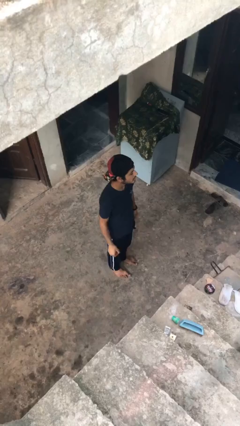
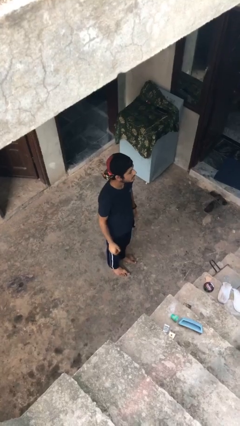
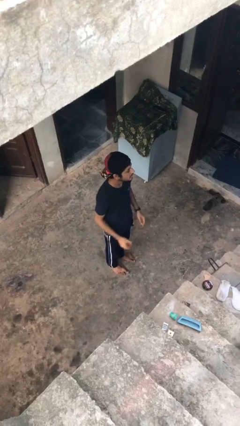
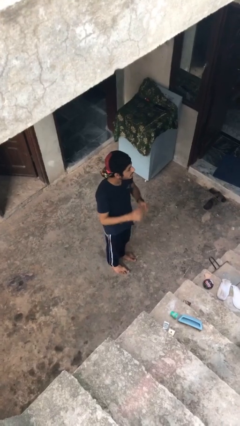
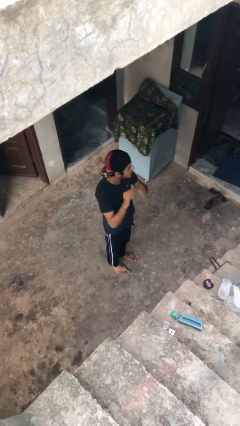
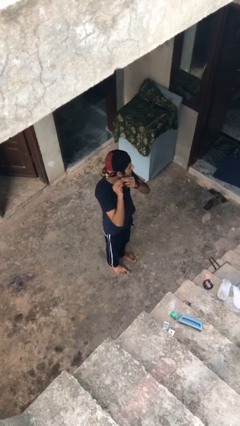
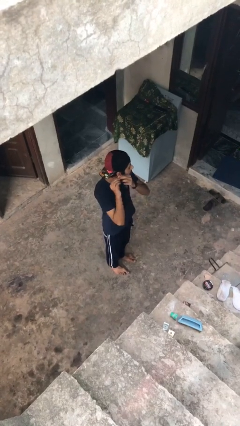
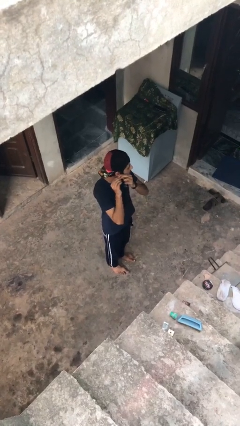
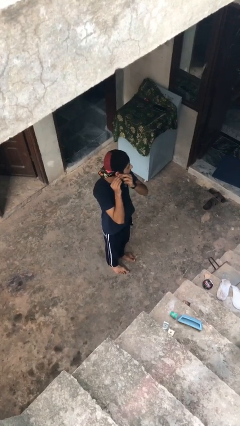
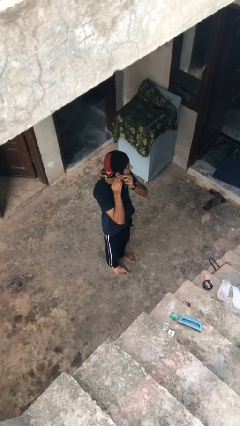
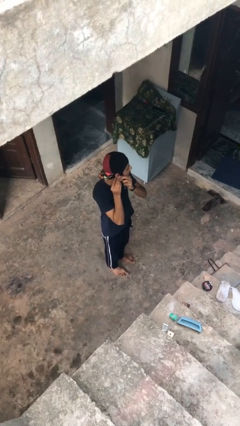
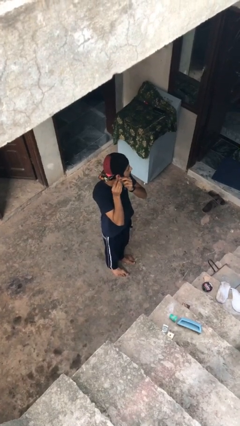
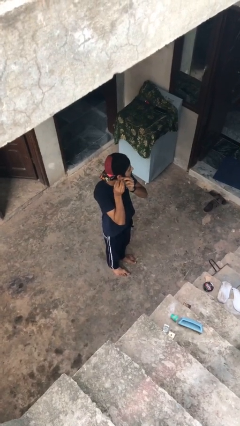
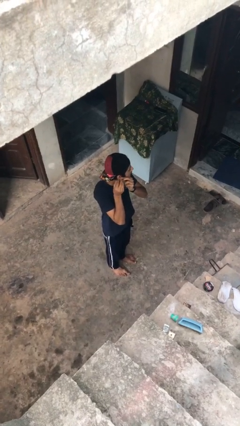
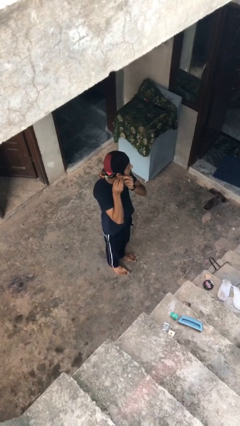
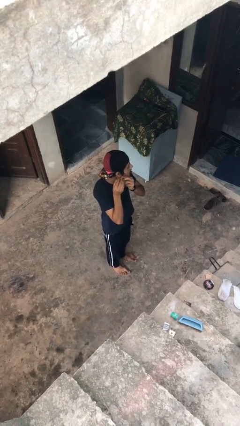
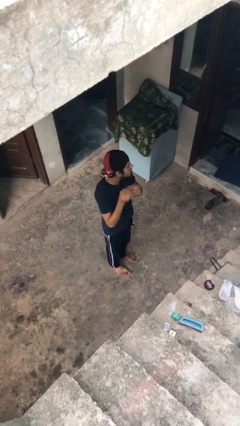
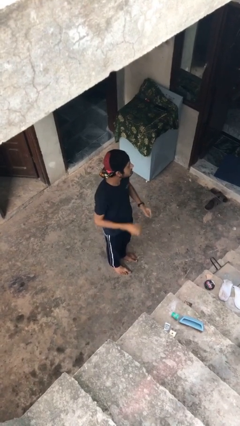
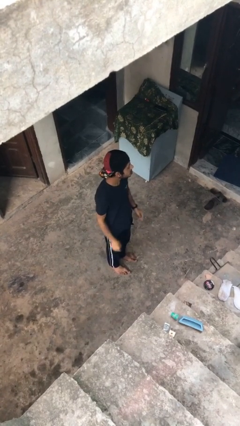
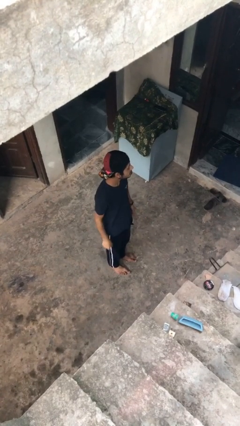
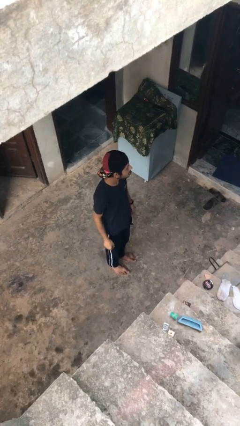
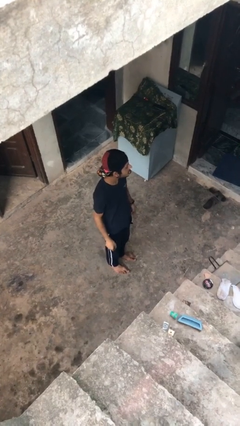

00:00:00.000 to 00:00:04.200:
person puts on earrings

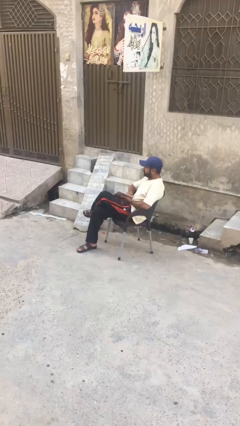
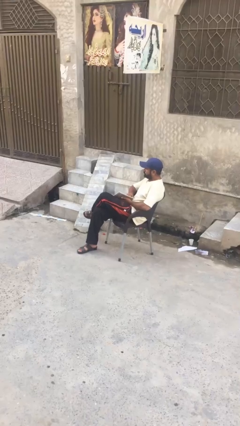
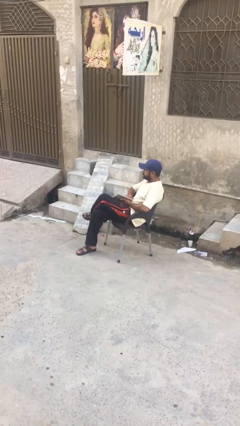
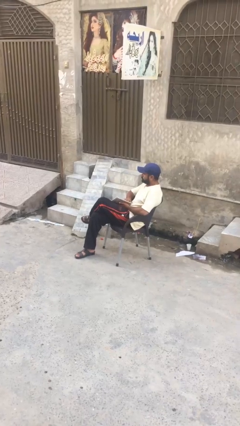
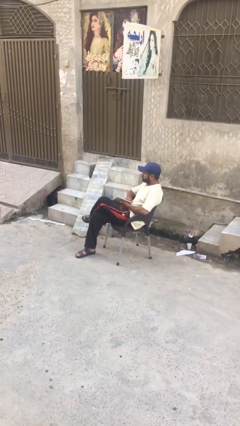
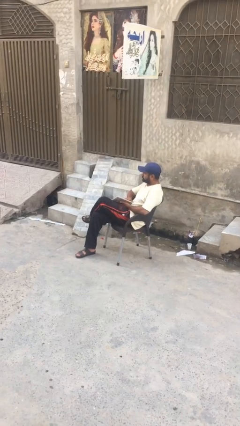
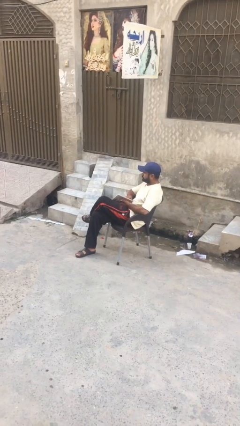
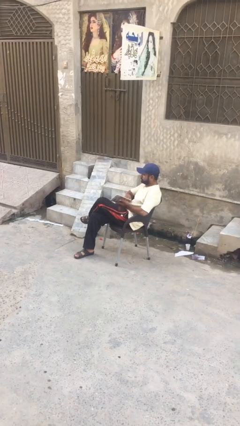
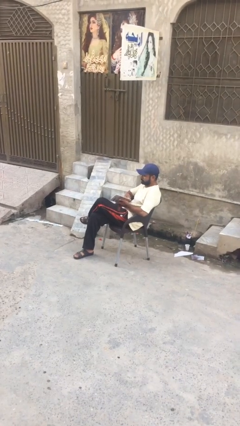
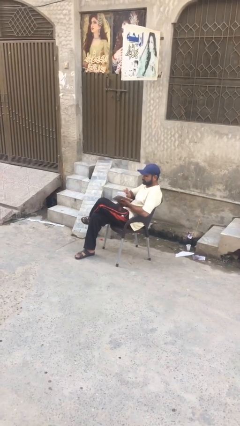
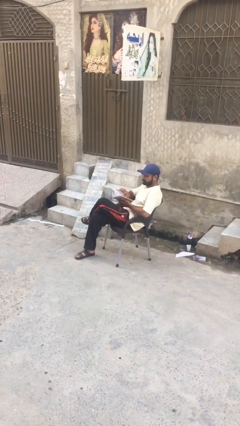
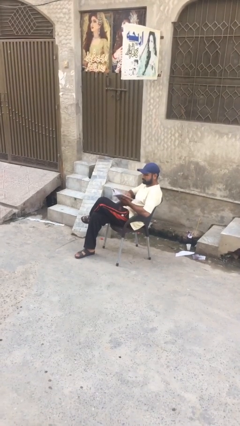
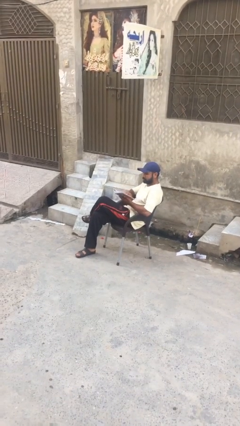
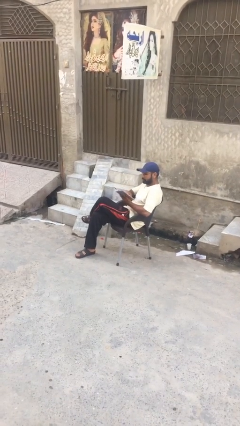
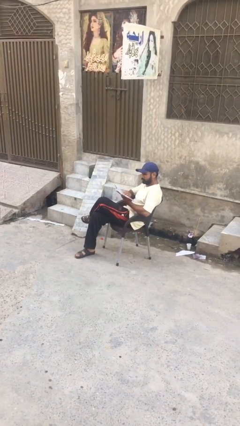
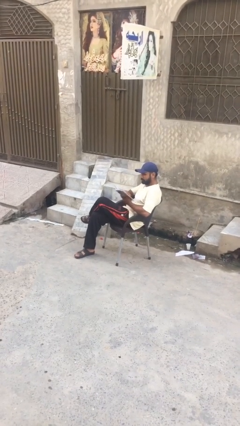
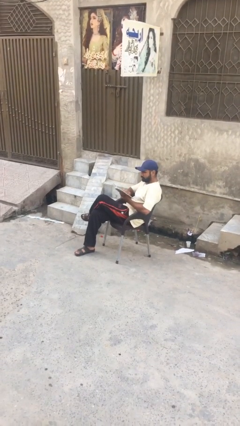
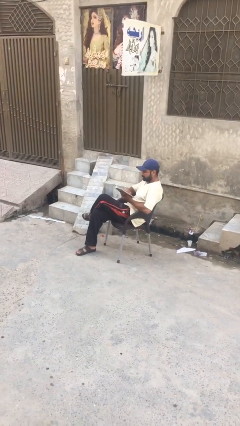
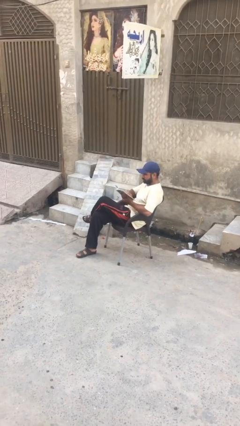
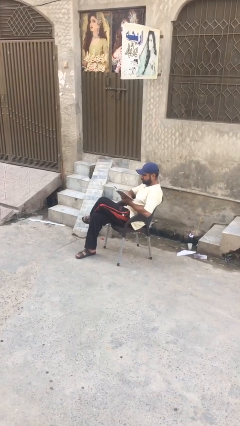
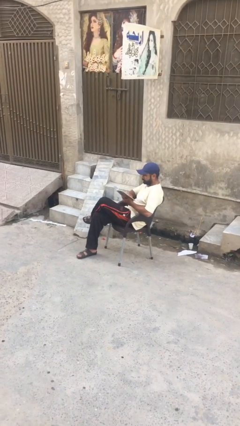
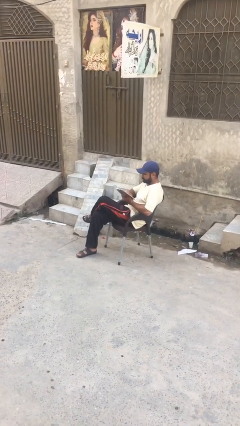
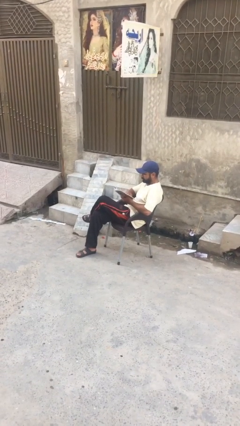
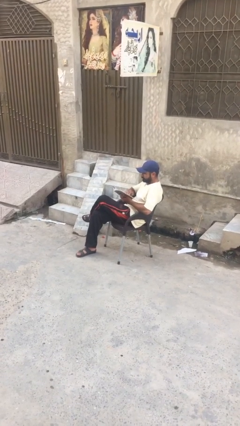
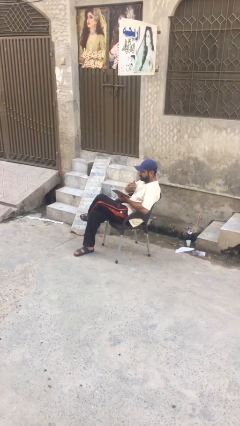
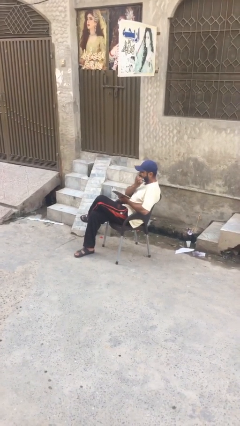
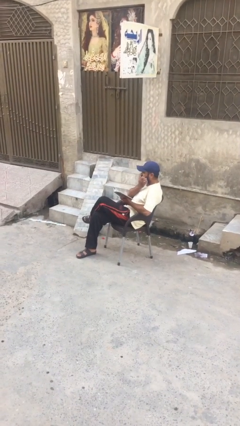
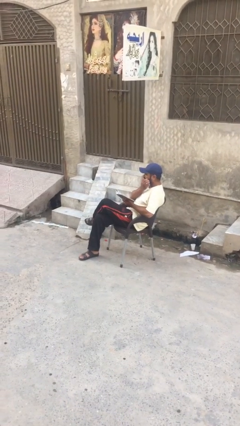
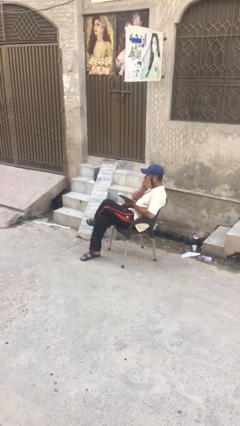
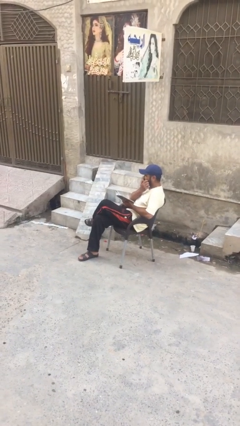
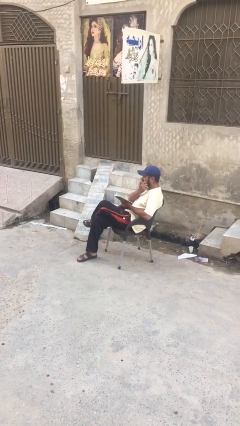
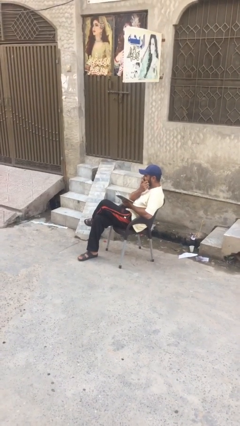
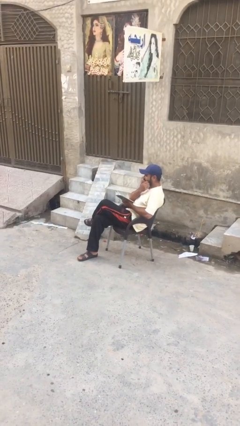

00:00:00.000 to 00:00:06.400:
person reads document

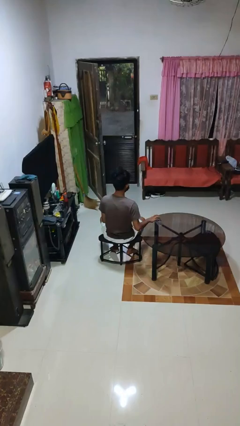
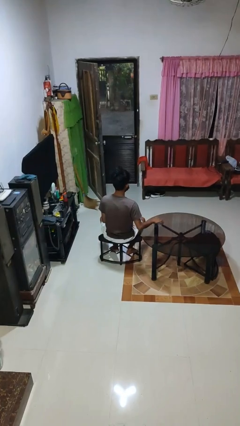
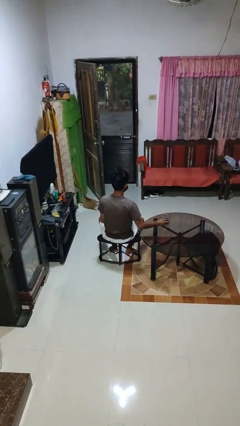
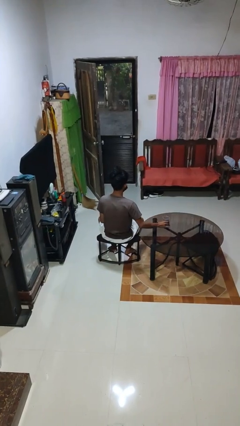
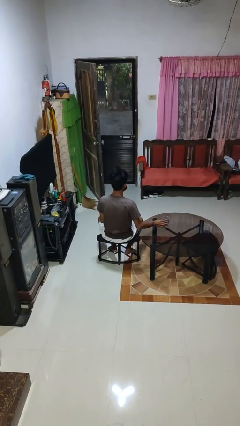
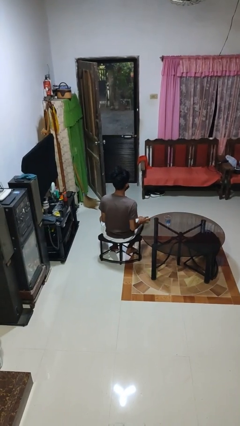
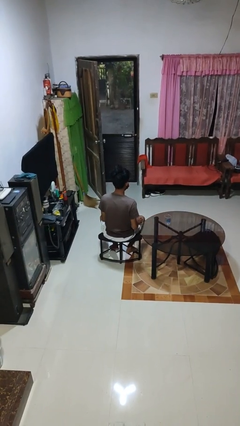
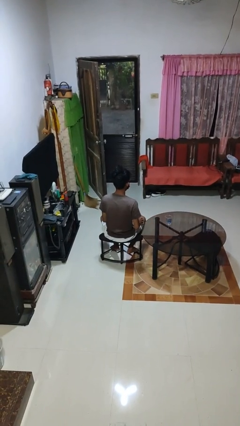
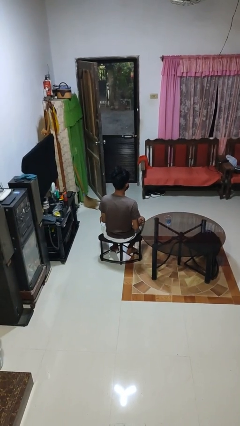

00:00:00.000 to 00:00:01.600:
person sets upright glass

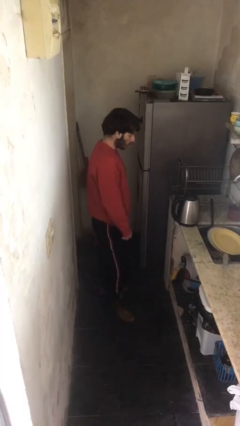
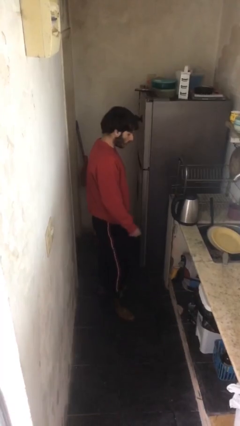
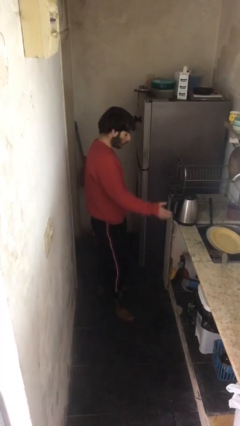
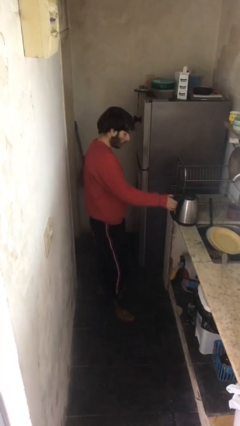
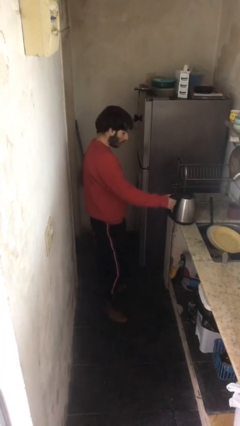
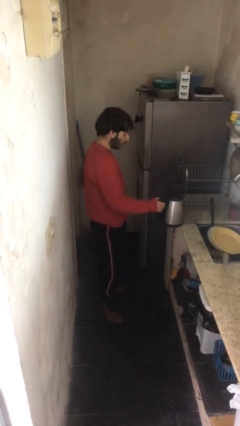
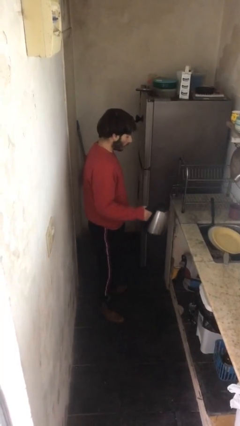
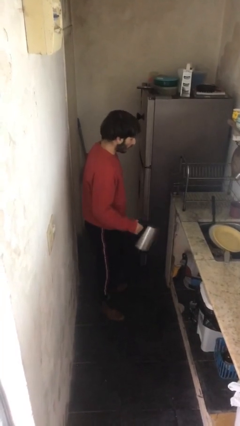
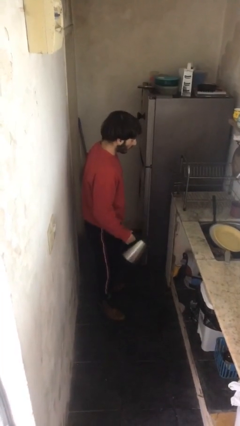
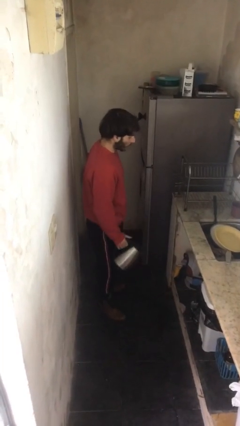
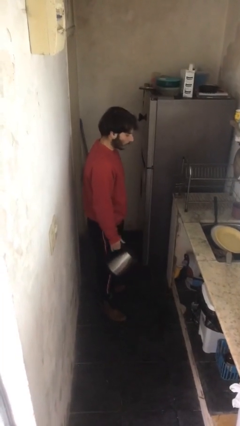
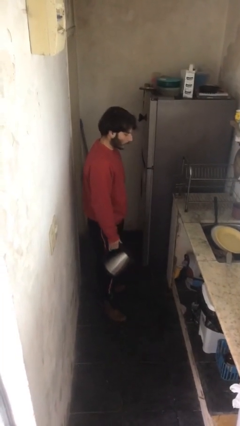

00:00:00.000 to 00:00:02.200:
person picks up object from countertop

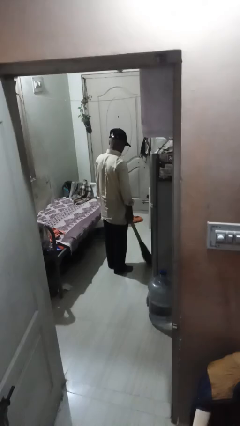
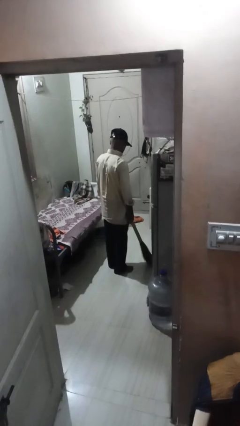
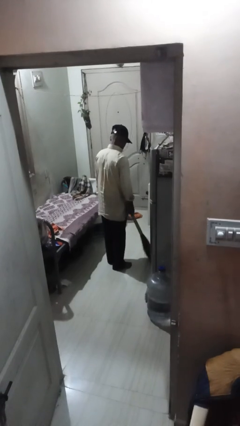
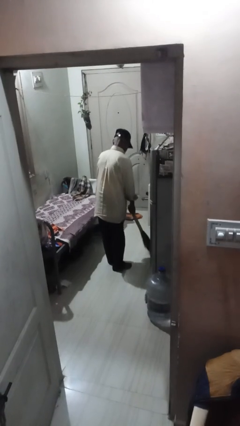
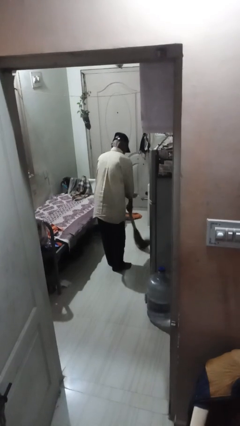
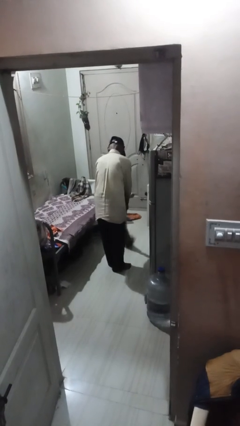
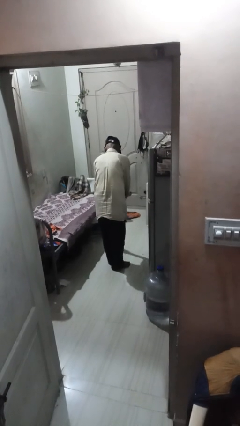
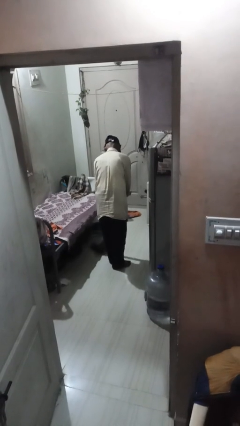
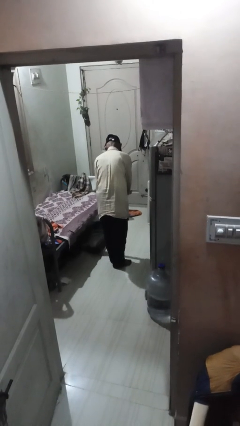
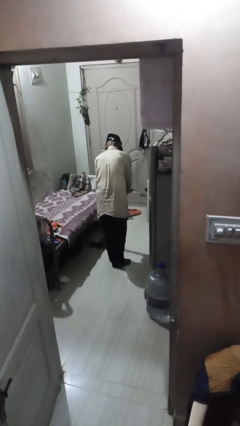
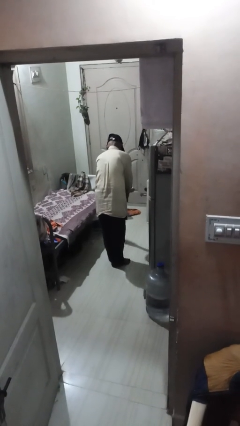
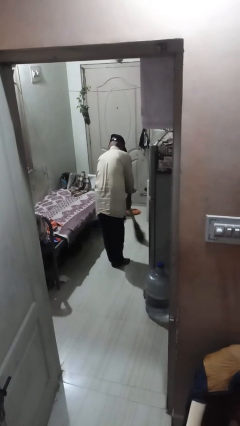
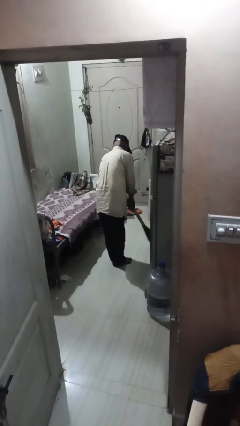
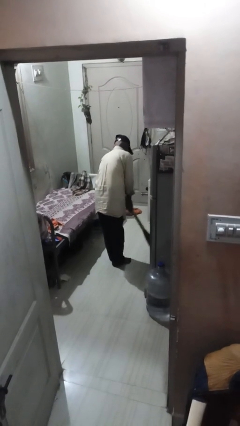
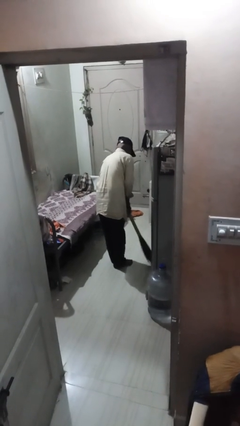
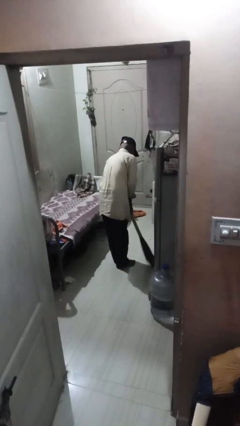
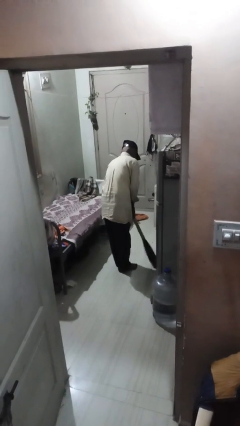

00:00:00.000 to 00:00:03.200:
person sweeps floor
